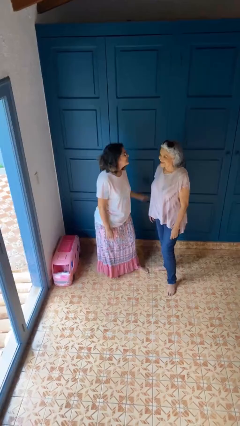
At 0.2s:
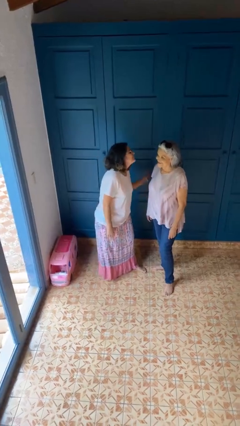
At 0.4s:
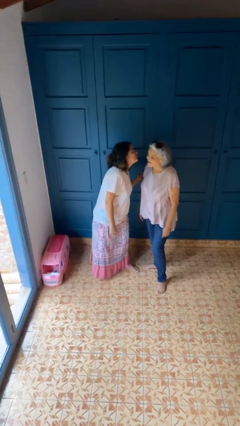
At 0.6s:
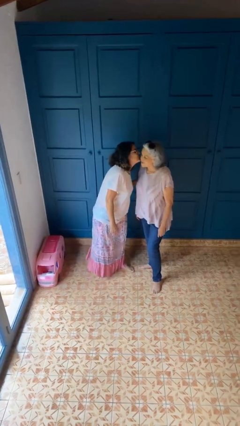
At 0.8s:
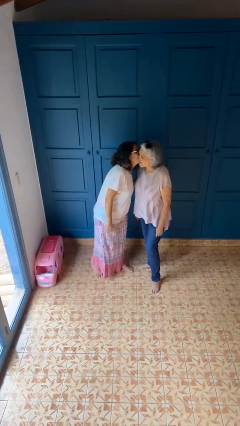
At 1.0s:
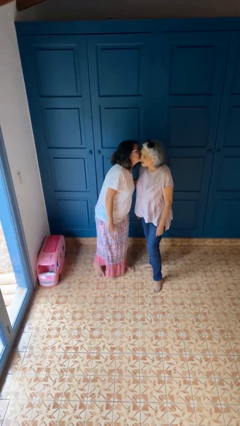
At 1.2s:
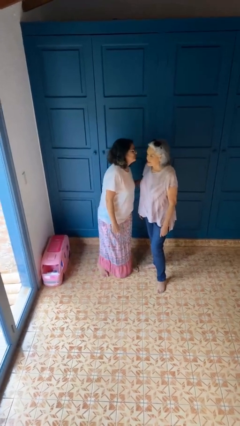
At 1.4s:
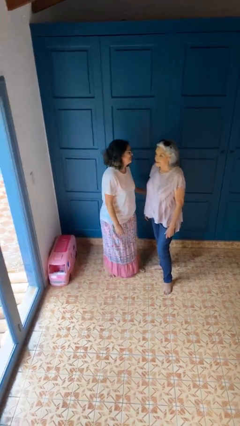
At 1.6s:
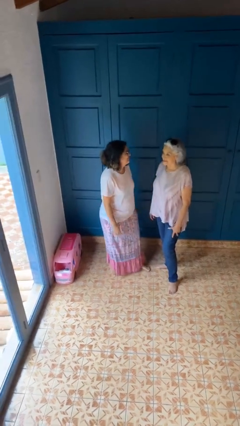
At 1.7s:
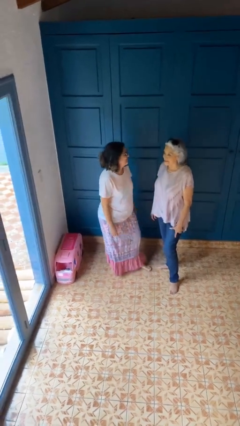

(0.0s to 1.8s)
person kisses cheek of person

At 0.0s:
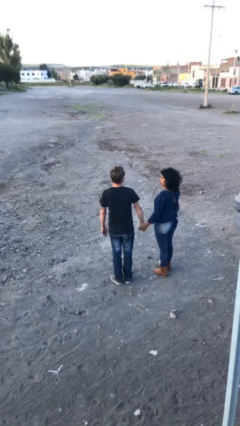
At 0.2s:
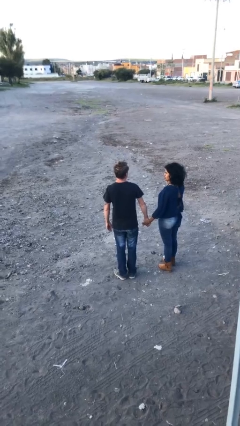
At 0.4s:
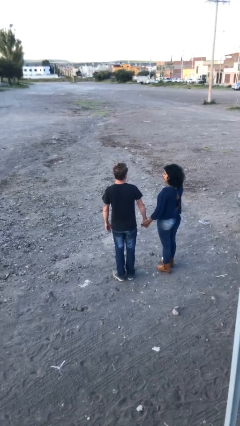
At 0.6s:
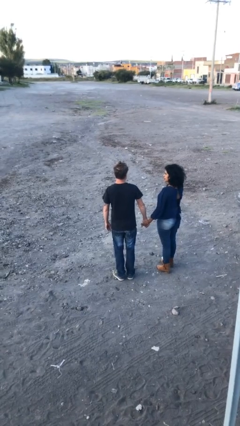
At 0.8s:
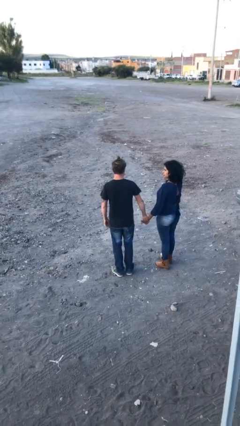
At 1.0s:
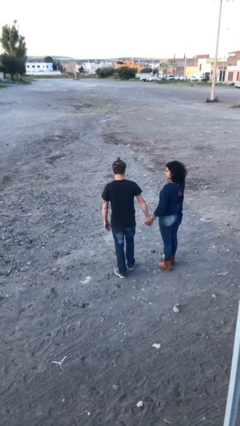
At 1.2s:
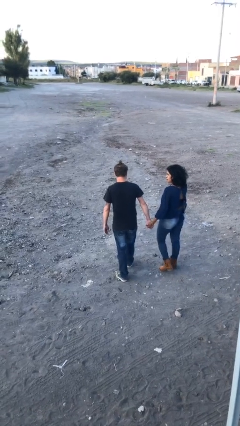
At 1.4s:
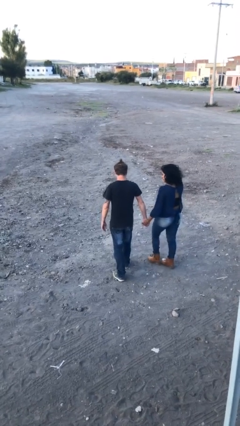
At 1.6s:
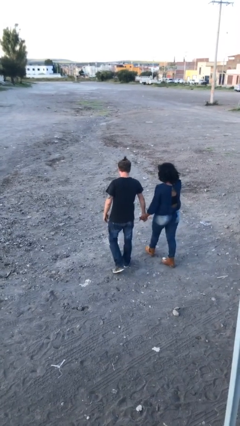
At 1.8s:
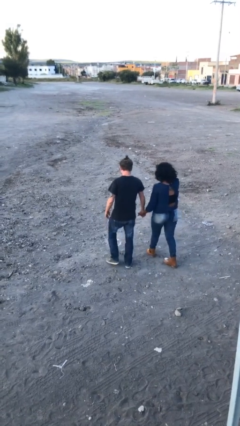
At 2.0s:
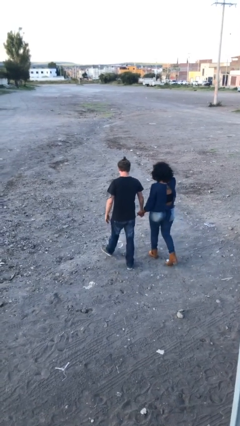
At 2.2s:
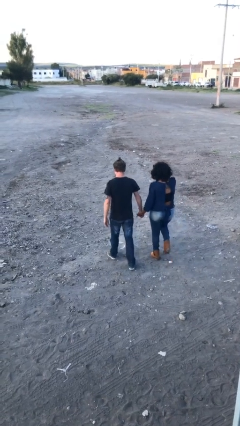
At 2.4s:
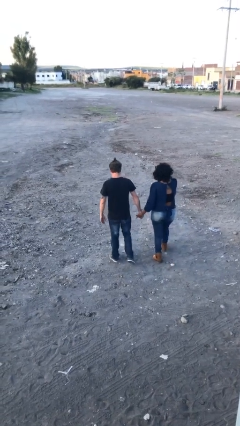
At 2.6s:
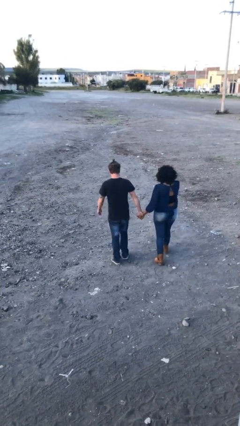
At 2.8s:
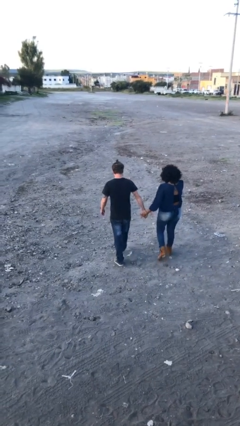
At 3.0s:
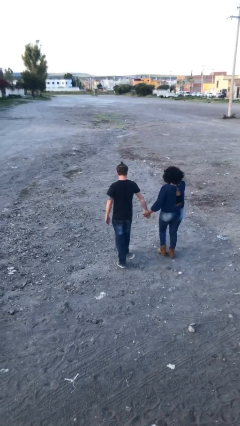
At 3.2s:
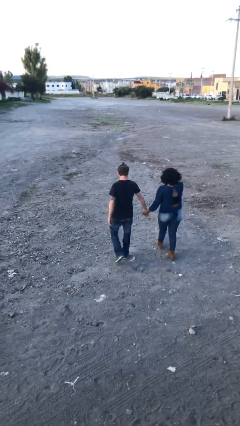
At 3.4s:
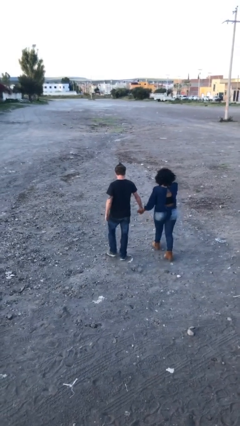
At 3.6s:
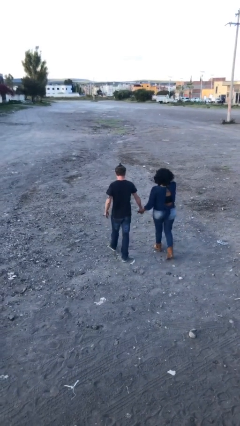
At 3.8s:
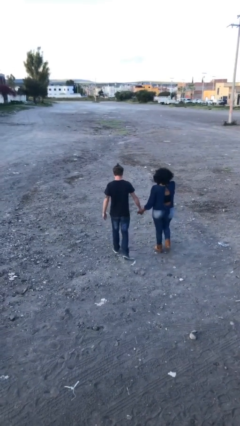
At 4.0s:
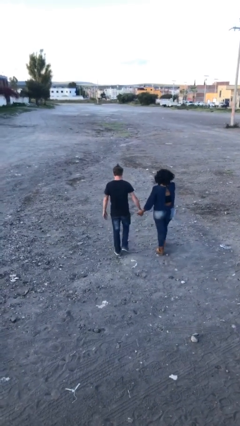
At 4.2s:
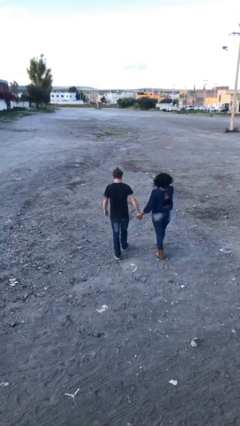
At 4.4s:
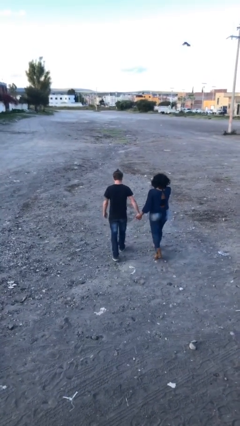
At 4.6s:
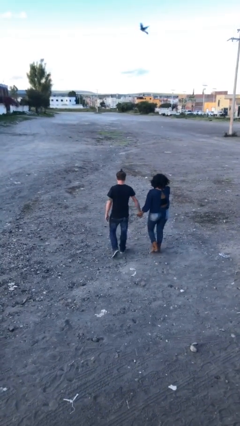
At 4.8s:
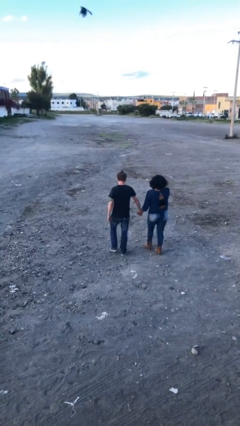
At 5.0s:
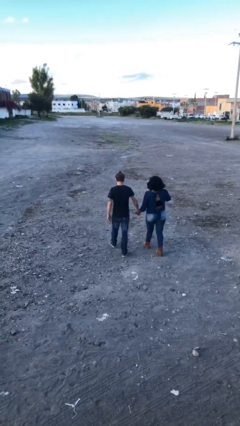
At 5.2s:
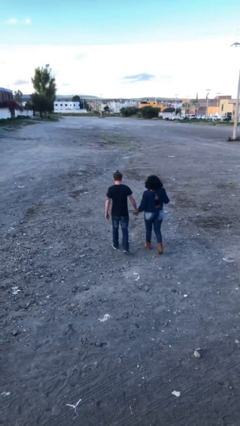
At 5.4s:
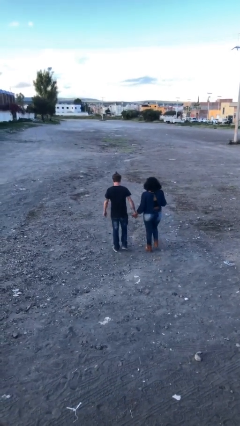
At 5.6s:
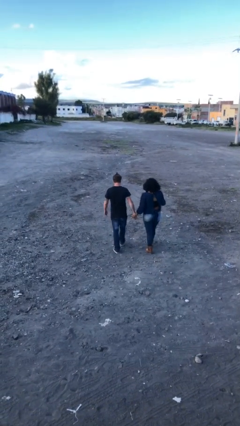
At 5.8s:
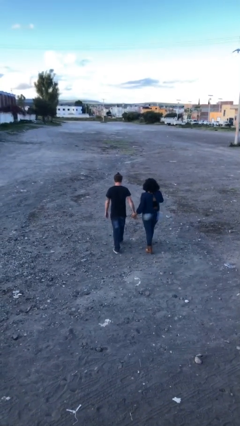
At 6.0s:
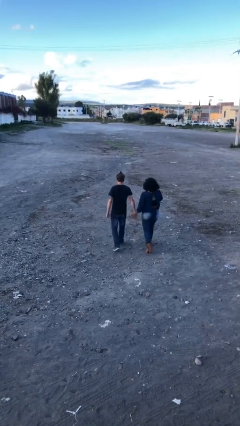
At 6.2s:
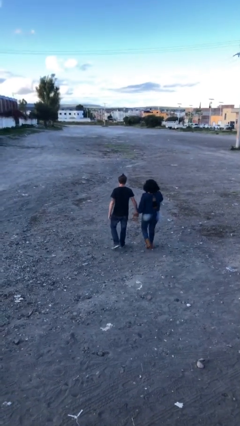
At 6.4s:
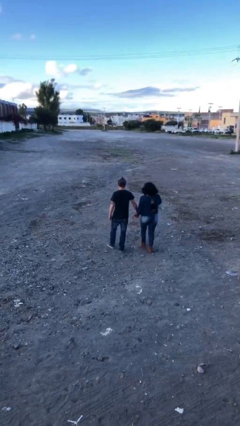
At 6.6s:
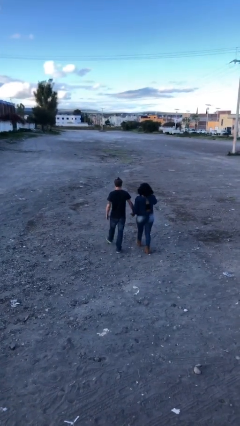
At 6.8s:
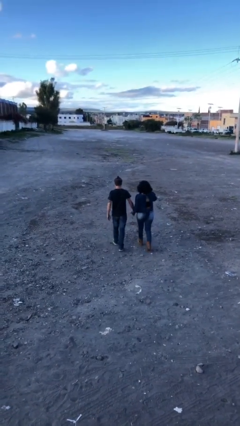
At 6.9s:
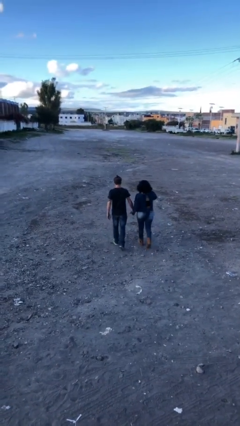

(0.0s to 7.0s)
person holds hand

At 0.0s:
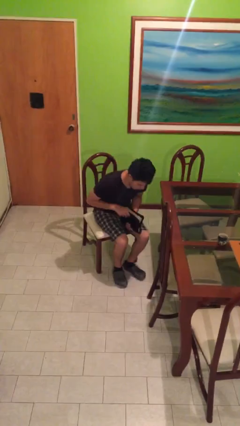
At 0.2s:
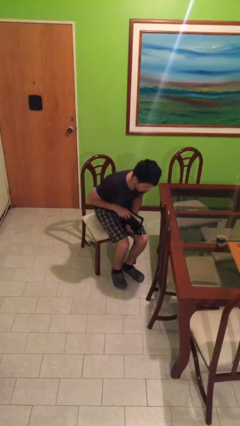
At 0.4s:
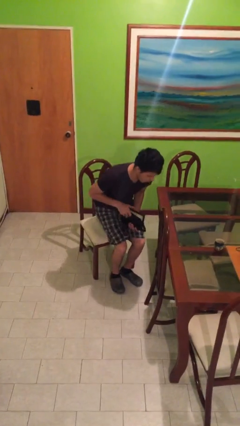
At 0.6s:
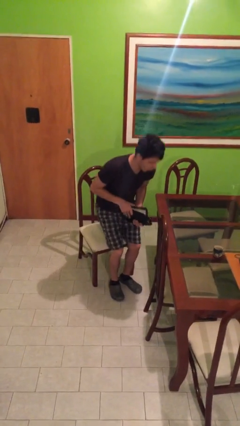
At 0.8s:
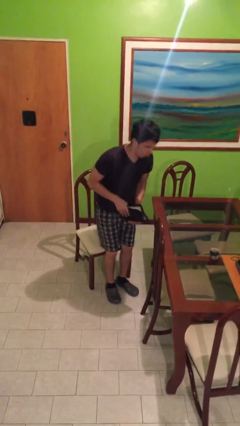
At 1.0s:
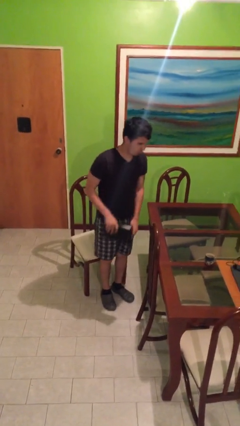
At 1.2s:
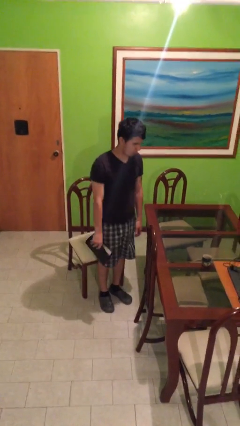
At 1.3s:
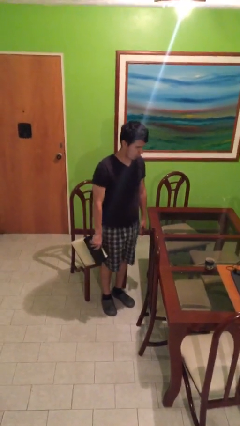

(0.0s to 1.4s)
person stands up

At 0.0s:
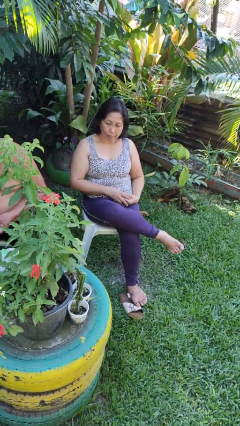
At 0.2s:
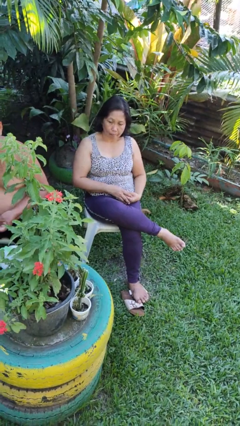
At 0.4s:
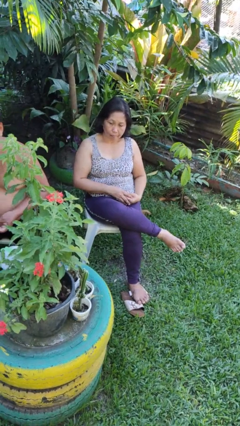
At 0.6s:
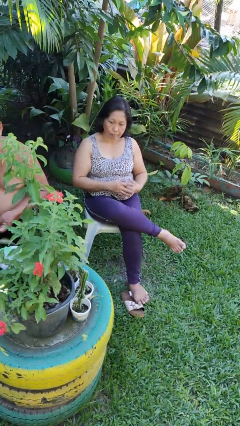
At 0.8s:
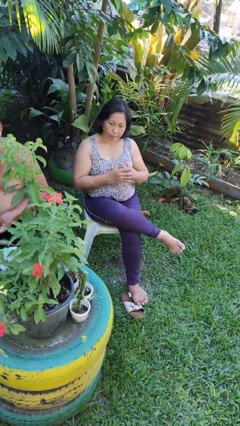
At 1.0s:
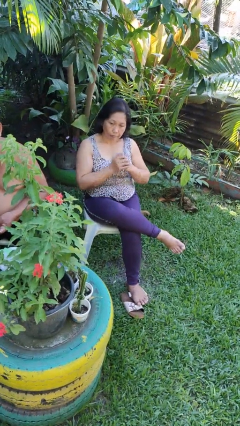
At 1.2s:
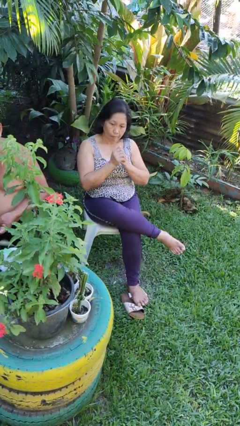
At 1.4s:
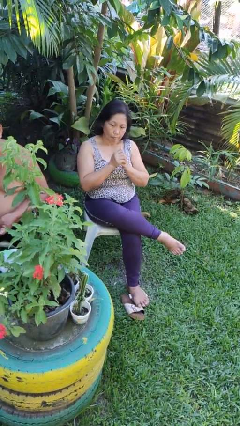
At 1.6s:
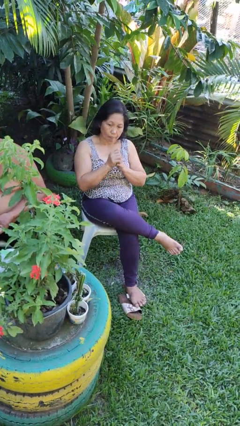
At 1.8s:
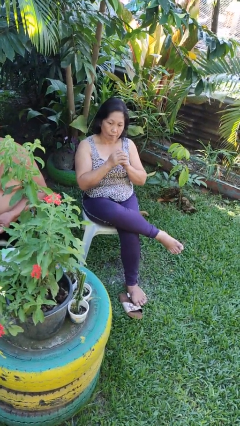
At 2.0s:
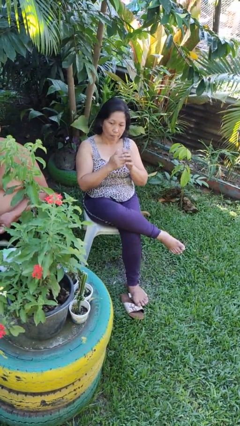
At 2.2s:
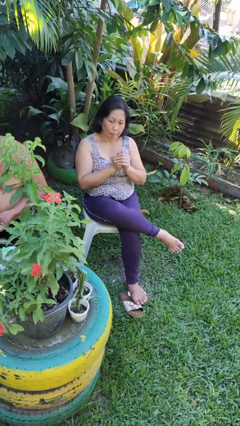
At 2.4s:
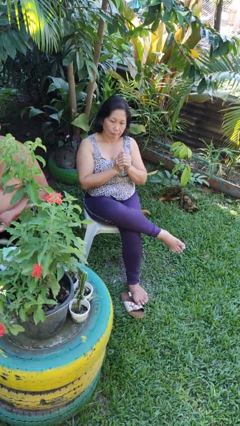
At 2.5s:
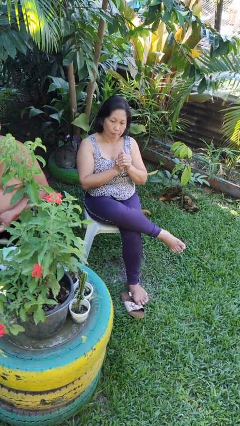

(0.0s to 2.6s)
person cracks knuckles

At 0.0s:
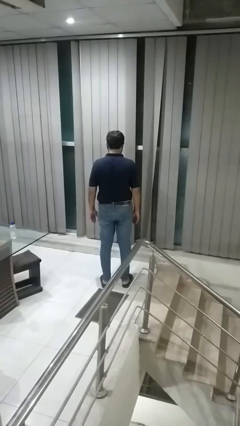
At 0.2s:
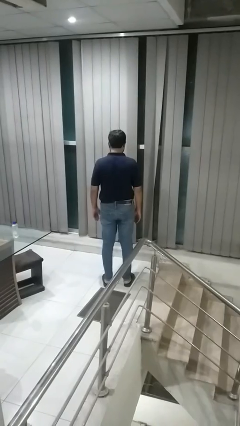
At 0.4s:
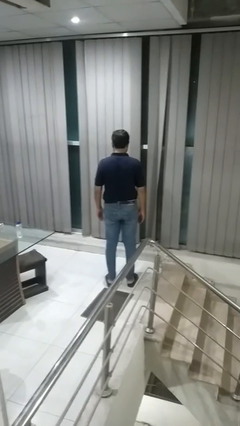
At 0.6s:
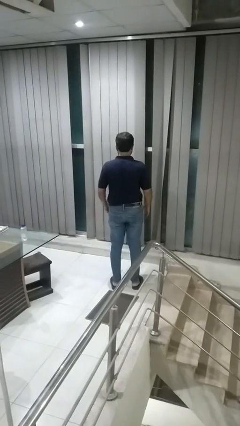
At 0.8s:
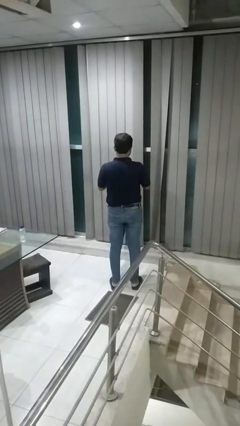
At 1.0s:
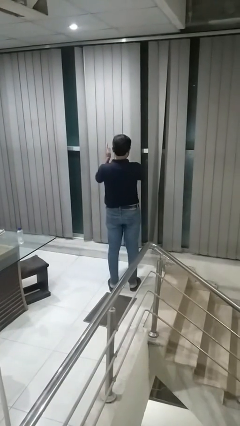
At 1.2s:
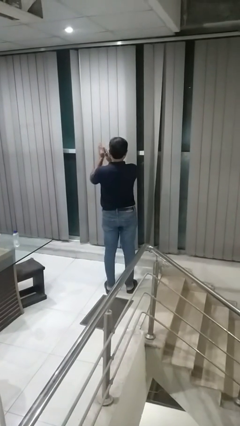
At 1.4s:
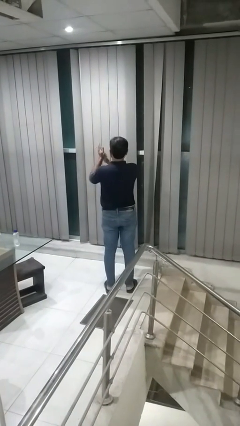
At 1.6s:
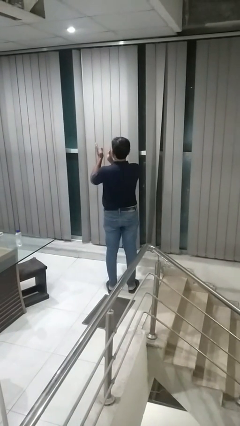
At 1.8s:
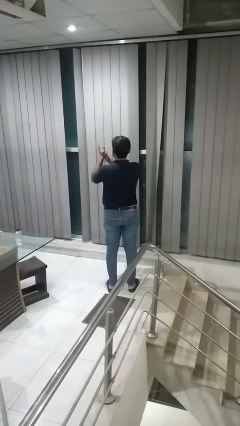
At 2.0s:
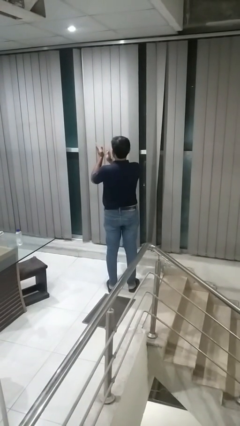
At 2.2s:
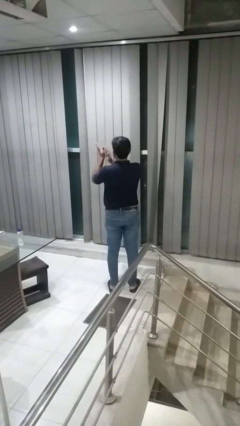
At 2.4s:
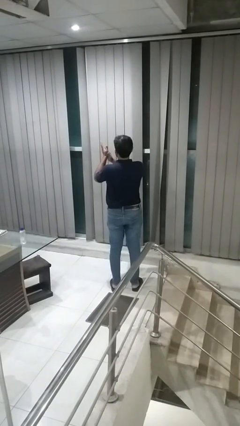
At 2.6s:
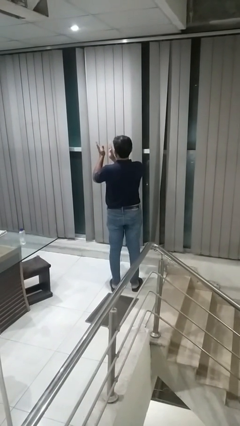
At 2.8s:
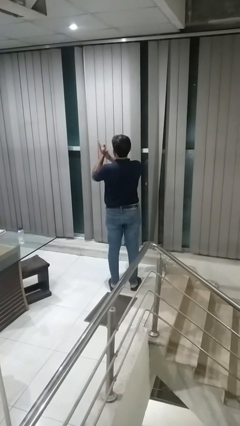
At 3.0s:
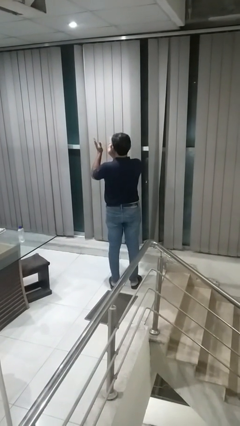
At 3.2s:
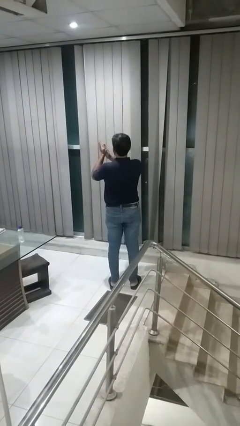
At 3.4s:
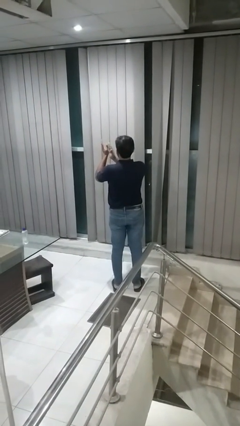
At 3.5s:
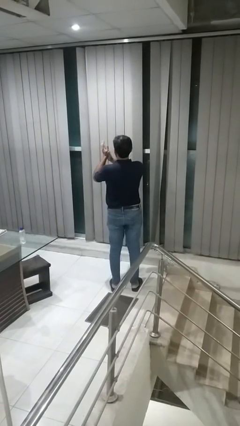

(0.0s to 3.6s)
person claps hands

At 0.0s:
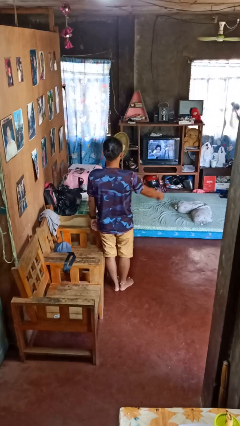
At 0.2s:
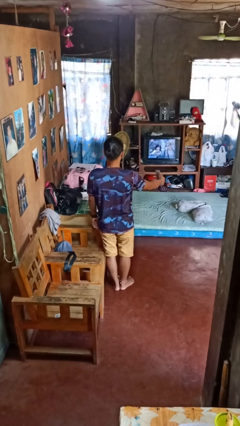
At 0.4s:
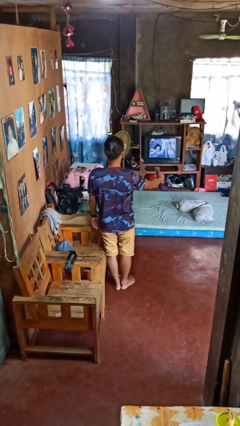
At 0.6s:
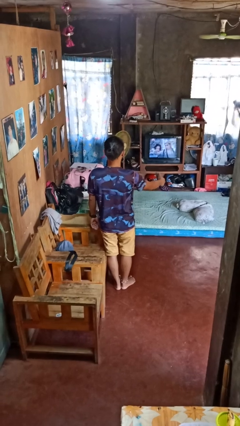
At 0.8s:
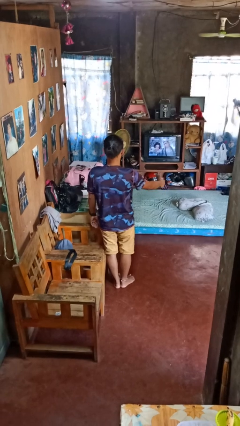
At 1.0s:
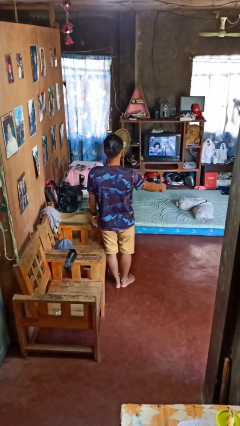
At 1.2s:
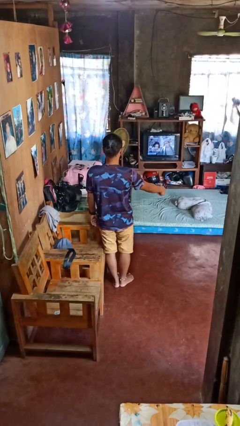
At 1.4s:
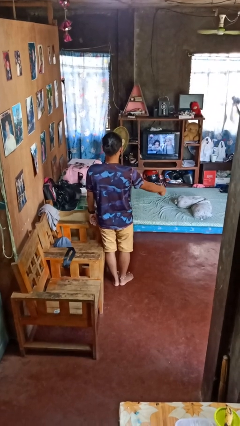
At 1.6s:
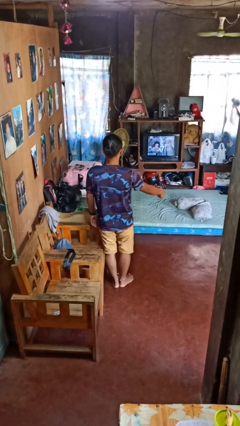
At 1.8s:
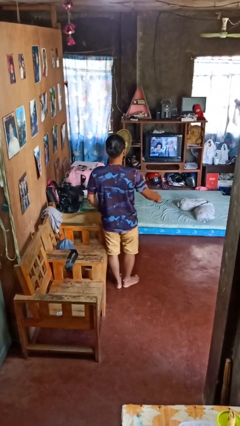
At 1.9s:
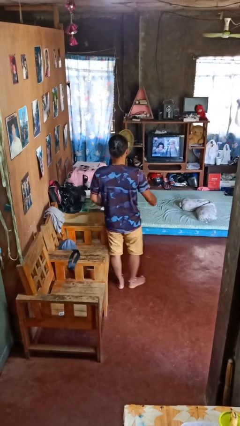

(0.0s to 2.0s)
person uses television remote
